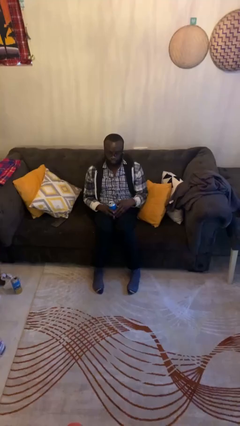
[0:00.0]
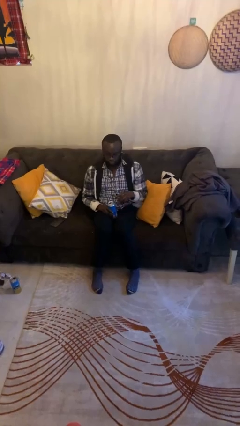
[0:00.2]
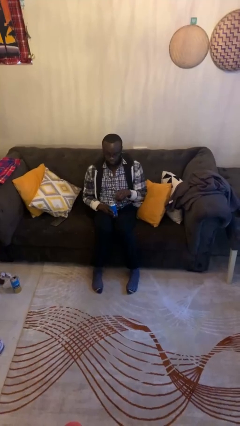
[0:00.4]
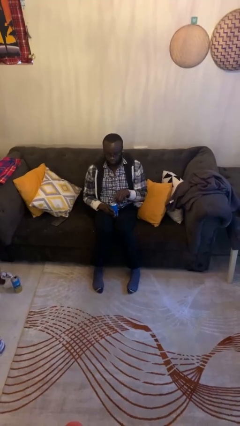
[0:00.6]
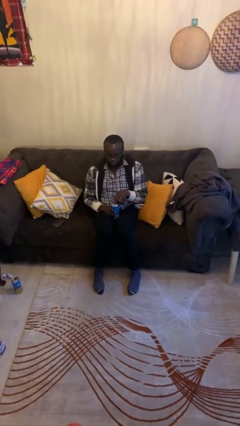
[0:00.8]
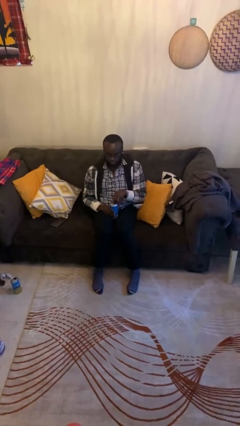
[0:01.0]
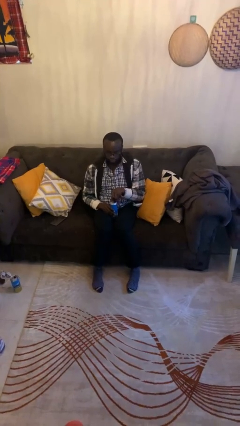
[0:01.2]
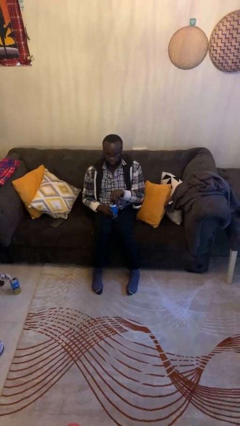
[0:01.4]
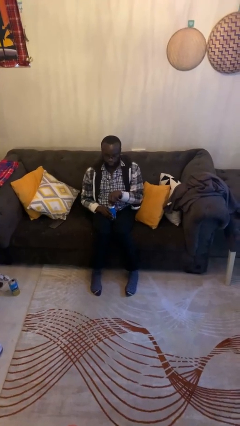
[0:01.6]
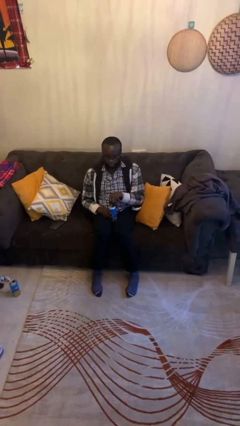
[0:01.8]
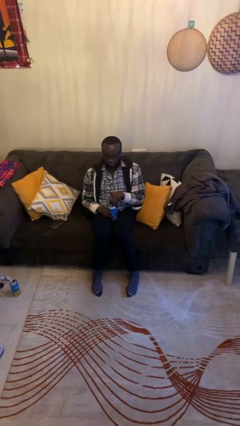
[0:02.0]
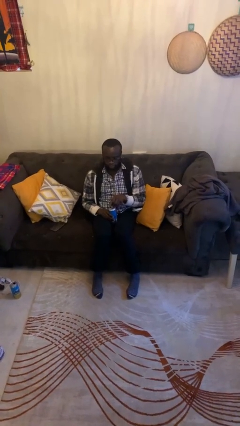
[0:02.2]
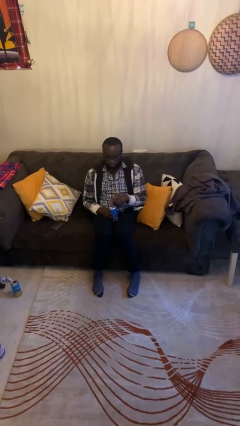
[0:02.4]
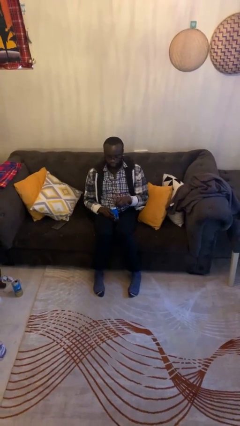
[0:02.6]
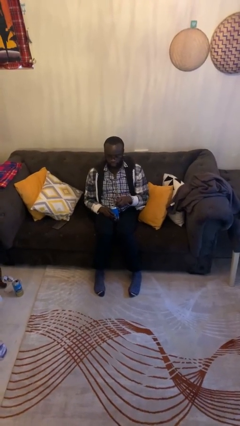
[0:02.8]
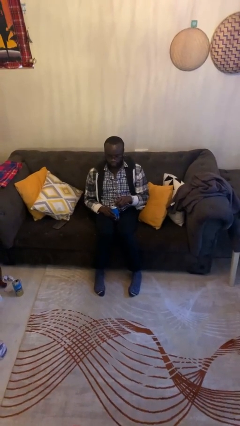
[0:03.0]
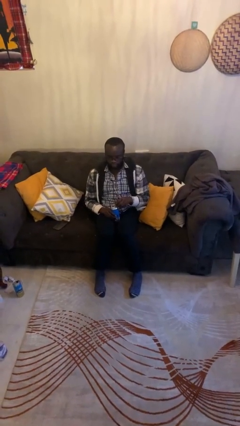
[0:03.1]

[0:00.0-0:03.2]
person opens beverage can

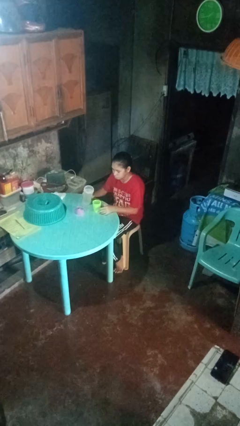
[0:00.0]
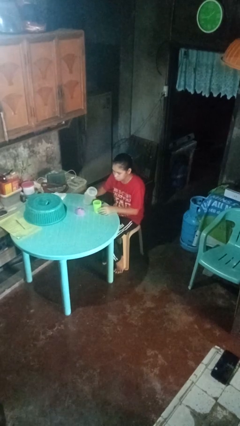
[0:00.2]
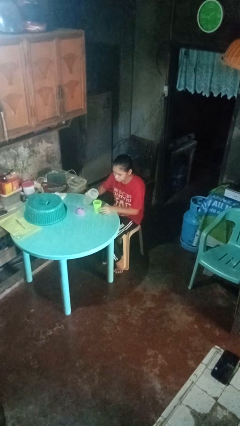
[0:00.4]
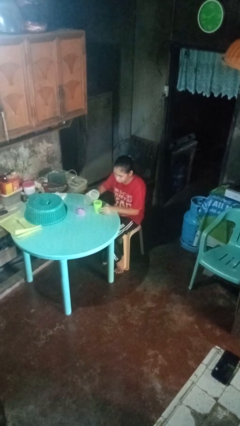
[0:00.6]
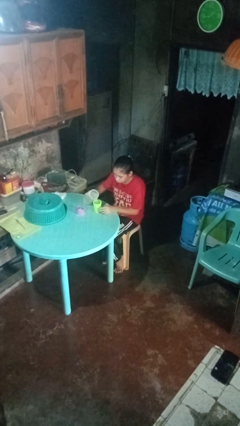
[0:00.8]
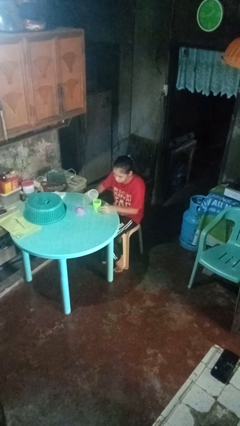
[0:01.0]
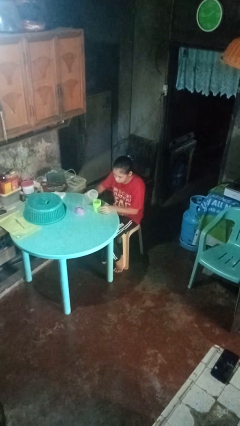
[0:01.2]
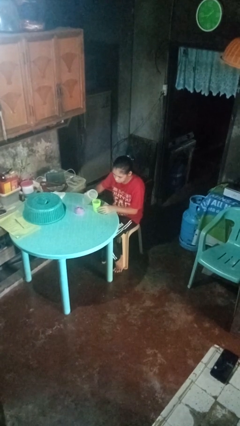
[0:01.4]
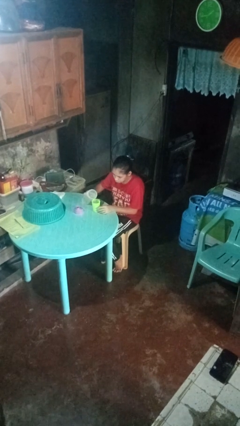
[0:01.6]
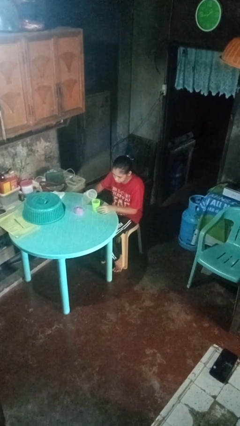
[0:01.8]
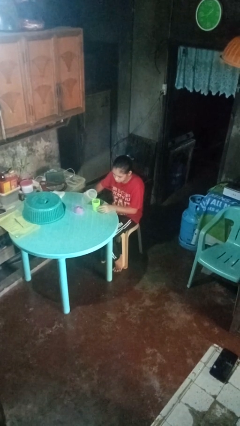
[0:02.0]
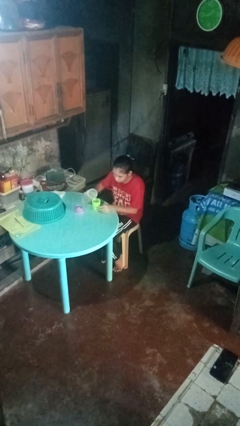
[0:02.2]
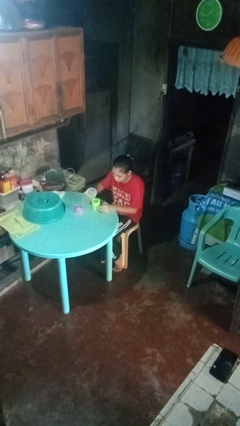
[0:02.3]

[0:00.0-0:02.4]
person pours liquid into cup

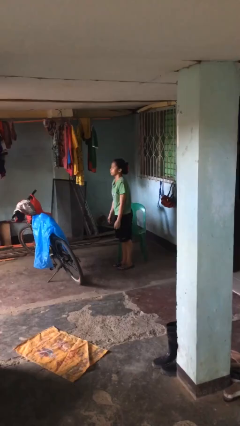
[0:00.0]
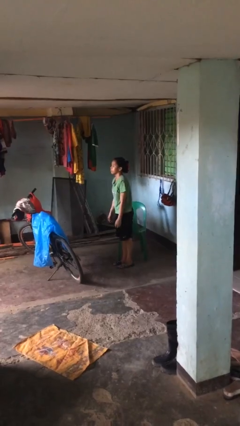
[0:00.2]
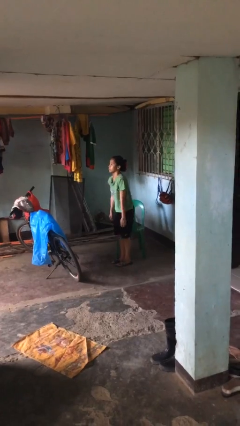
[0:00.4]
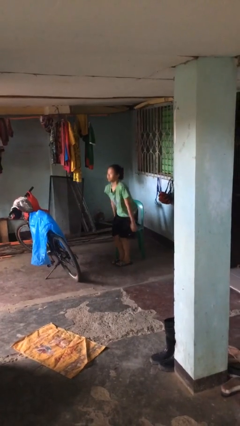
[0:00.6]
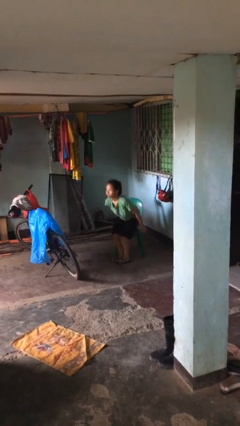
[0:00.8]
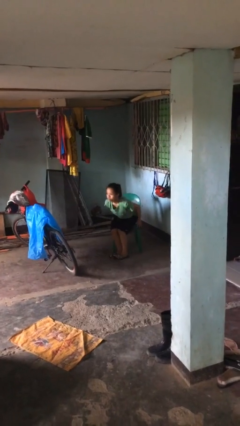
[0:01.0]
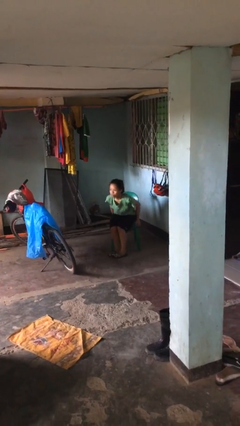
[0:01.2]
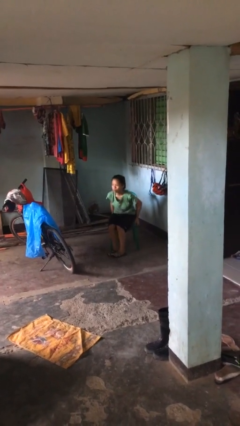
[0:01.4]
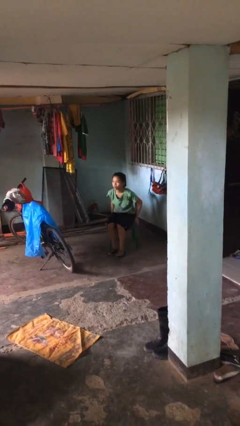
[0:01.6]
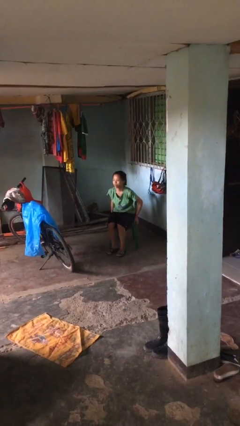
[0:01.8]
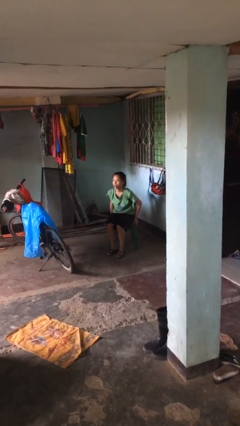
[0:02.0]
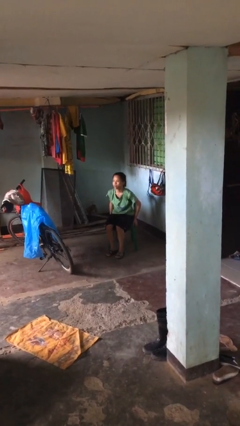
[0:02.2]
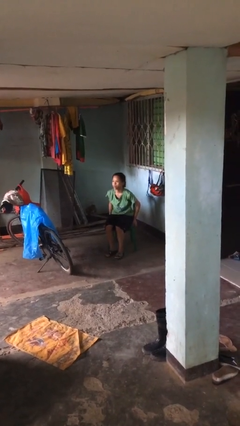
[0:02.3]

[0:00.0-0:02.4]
person sits down

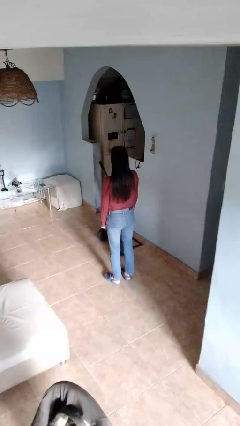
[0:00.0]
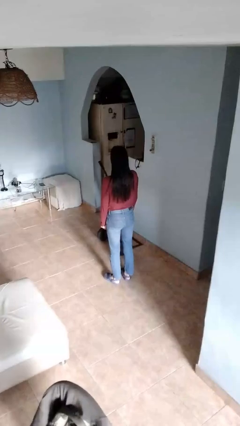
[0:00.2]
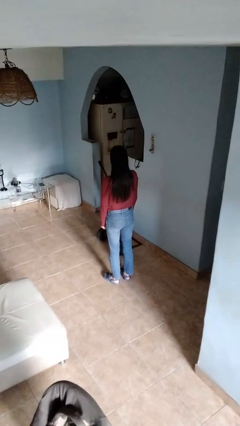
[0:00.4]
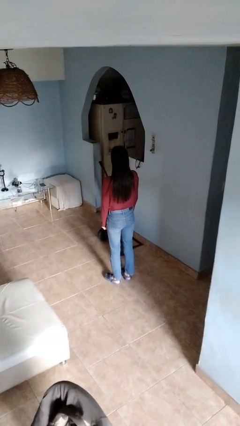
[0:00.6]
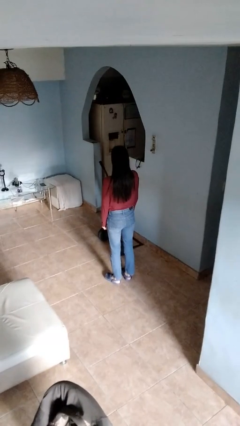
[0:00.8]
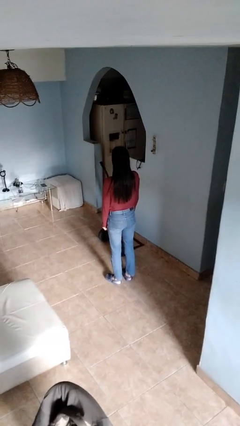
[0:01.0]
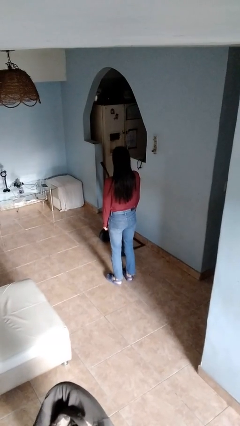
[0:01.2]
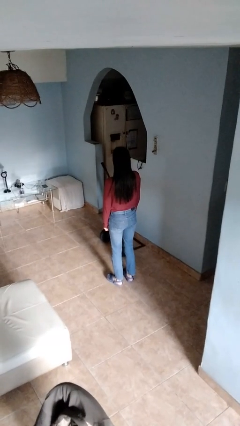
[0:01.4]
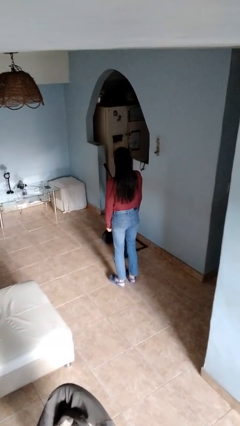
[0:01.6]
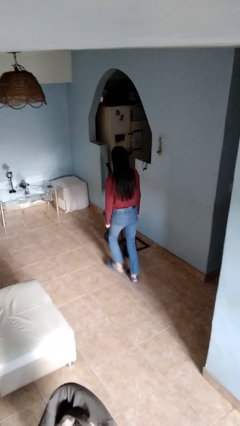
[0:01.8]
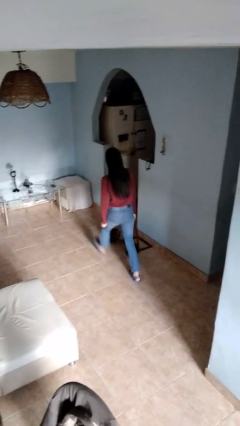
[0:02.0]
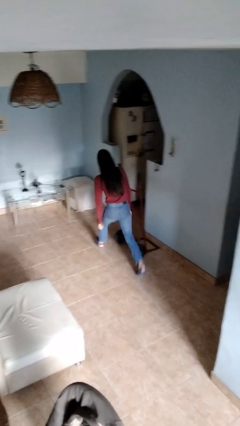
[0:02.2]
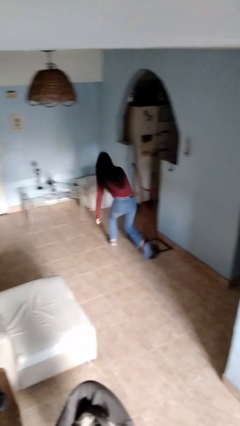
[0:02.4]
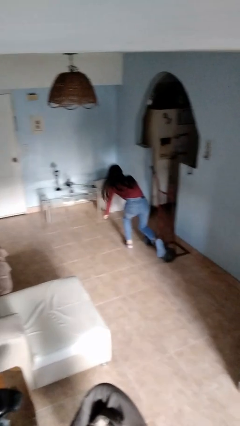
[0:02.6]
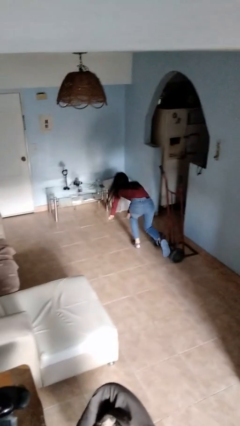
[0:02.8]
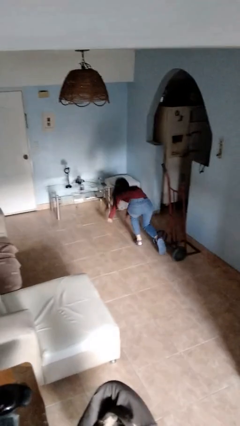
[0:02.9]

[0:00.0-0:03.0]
person trips on object on floor

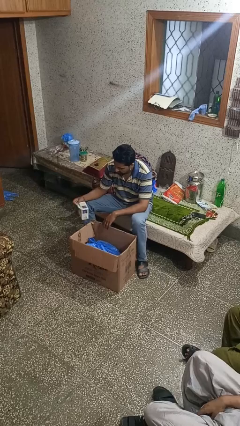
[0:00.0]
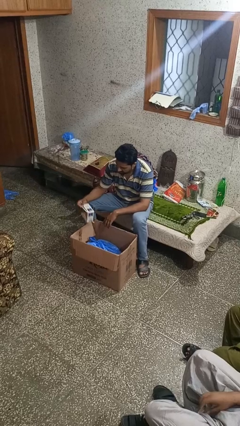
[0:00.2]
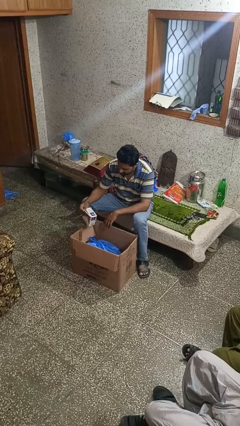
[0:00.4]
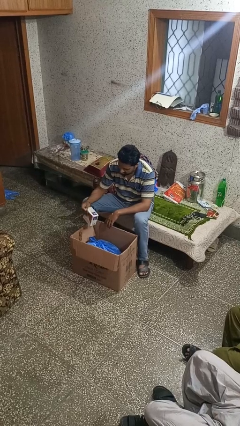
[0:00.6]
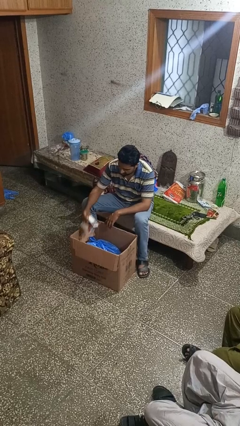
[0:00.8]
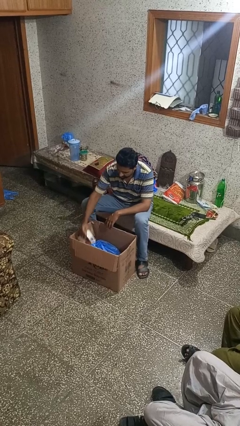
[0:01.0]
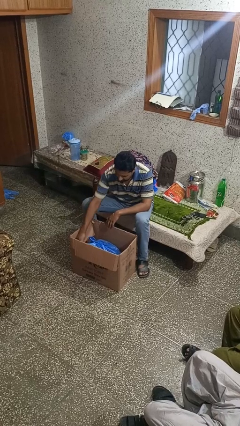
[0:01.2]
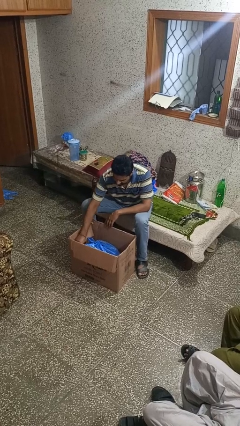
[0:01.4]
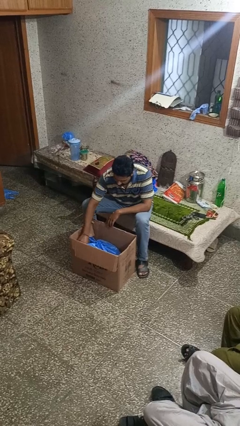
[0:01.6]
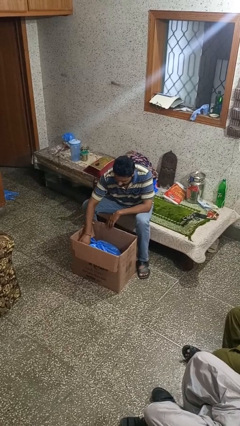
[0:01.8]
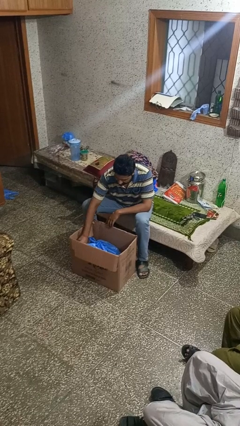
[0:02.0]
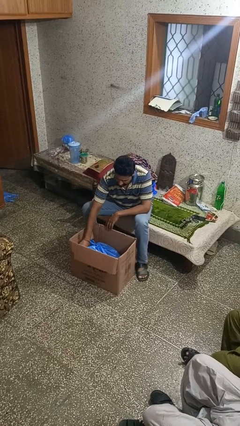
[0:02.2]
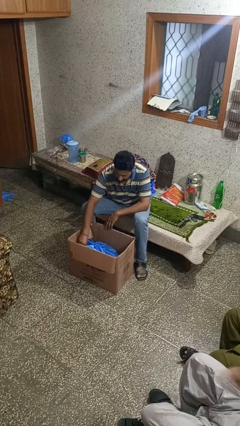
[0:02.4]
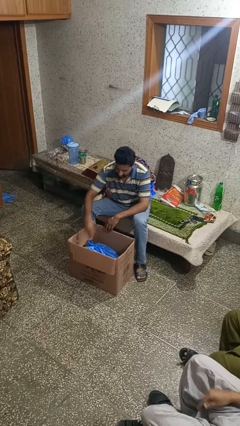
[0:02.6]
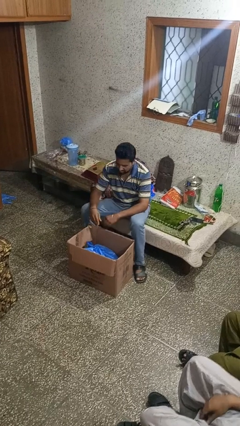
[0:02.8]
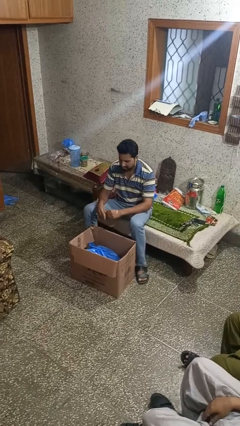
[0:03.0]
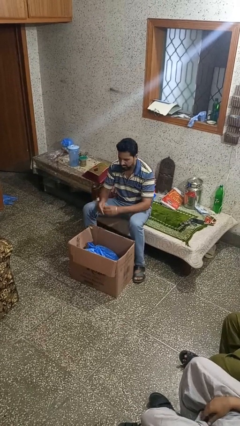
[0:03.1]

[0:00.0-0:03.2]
person puts object into box

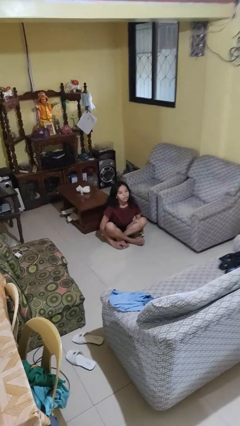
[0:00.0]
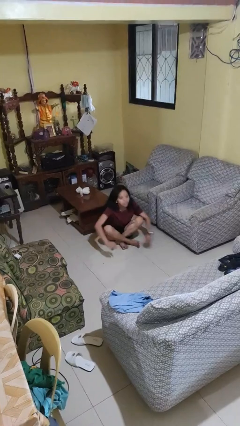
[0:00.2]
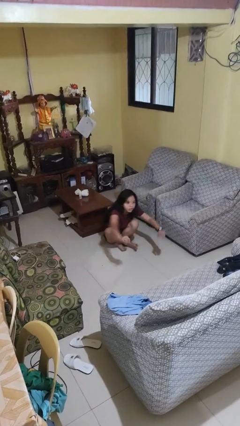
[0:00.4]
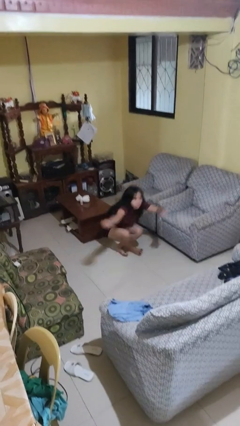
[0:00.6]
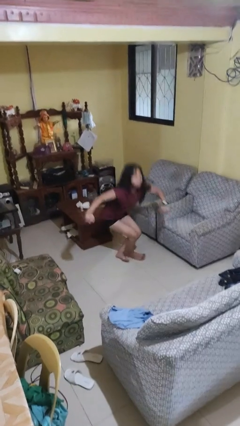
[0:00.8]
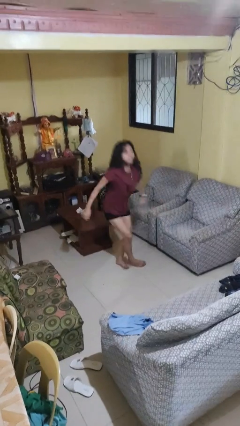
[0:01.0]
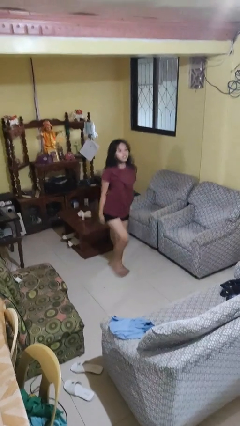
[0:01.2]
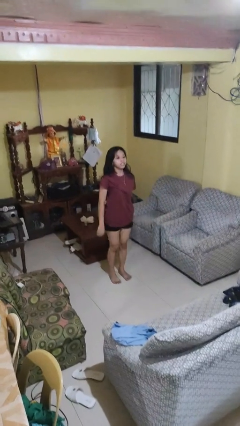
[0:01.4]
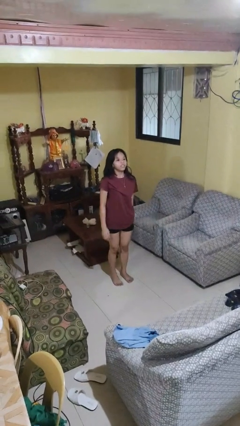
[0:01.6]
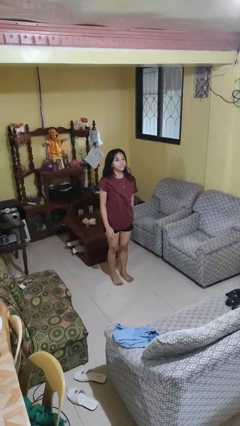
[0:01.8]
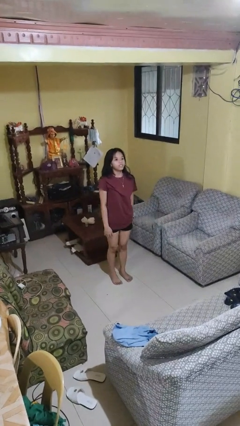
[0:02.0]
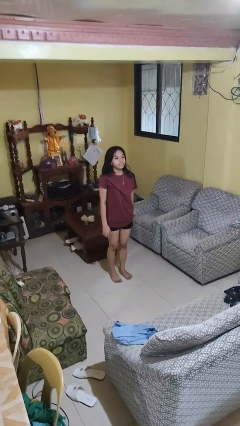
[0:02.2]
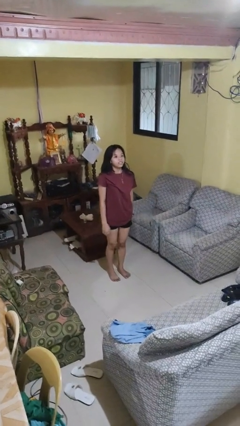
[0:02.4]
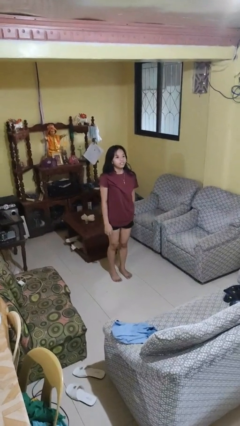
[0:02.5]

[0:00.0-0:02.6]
person stands up from floor

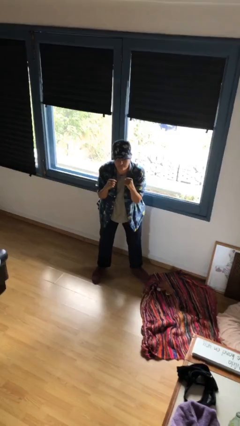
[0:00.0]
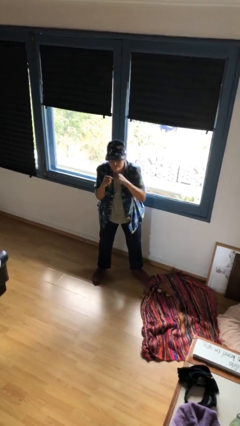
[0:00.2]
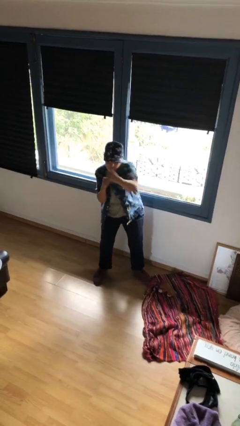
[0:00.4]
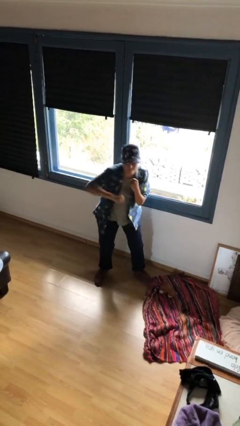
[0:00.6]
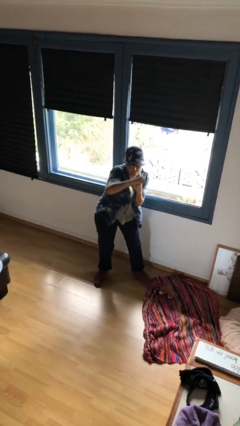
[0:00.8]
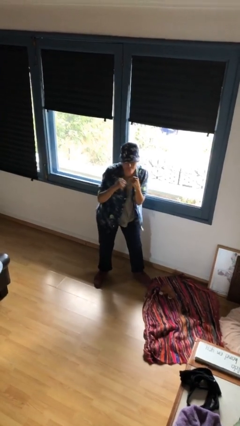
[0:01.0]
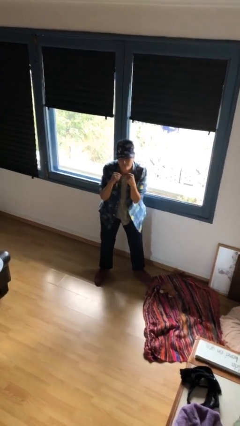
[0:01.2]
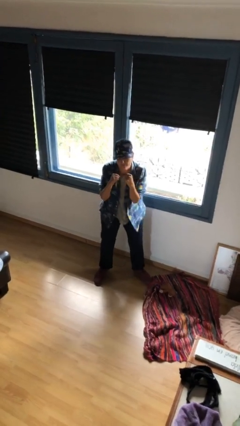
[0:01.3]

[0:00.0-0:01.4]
person punches
